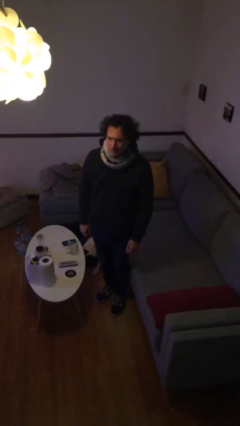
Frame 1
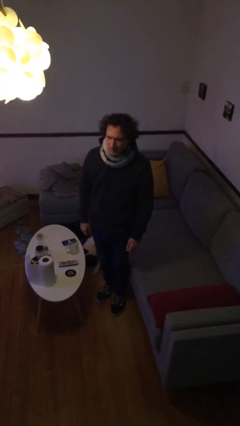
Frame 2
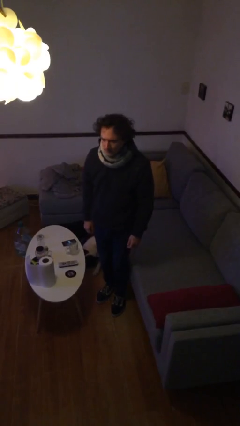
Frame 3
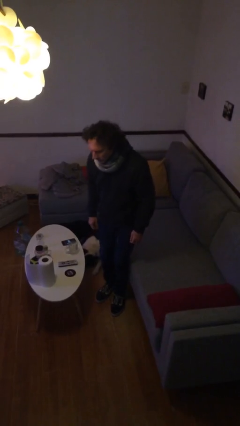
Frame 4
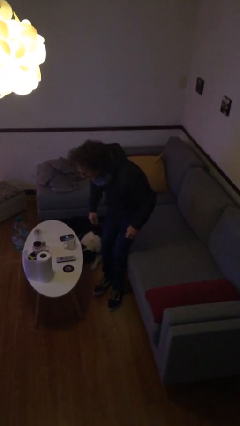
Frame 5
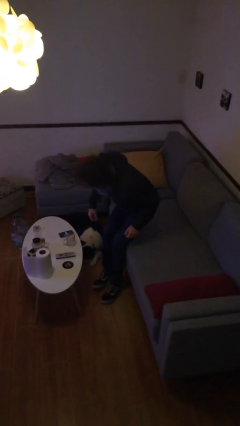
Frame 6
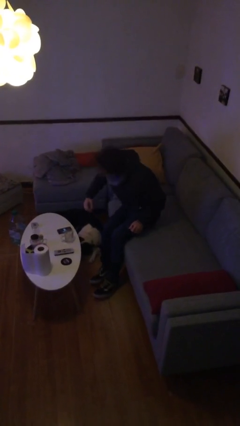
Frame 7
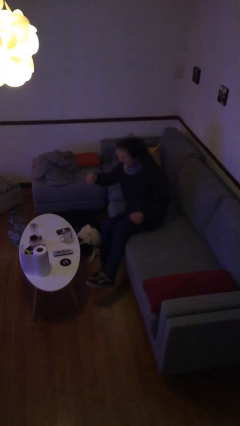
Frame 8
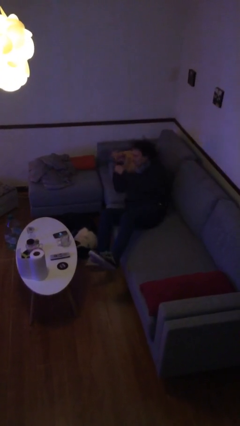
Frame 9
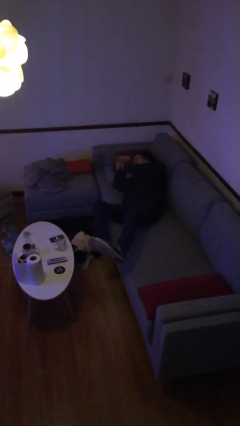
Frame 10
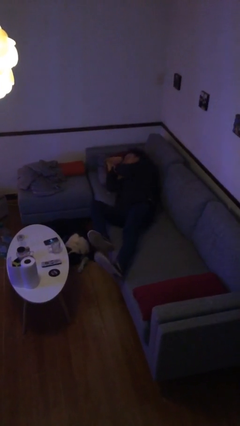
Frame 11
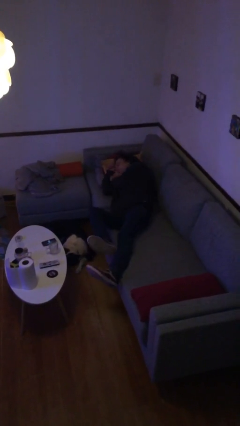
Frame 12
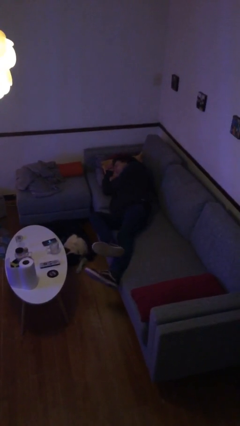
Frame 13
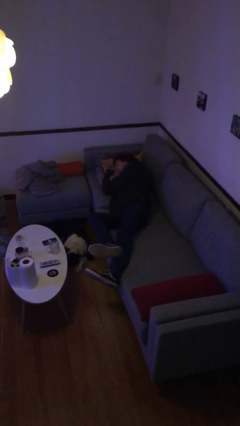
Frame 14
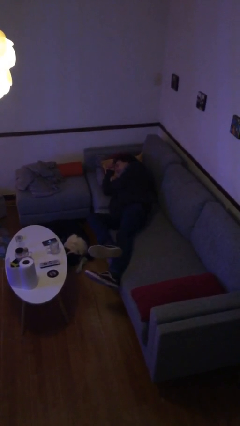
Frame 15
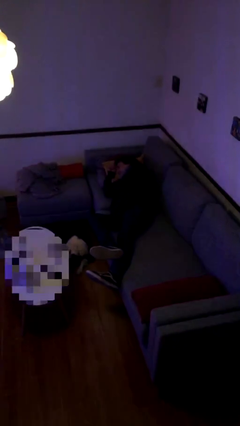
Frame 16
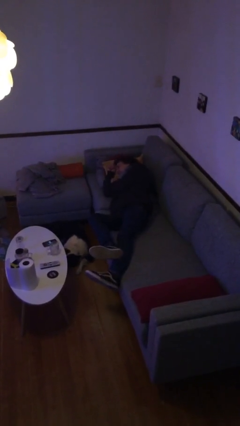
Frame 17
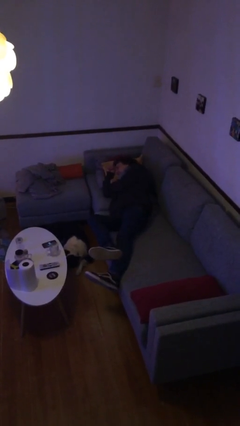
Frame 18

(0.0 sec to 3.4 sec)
person lies down on couch

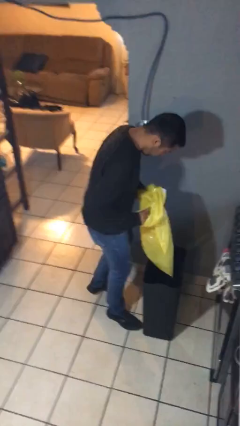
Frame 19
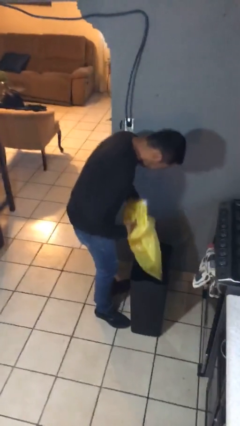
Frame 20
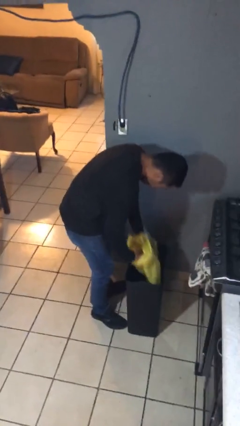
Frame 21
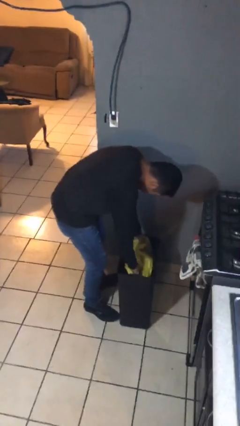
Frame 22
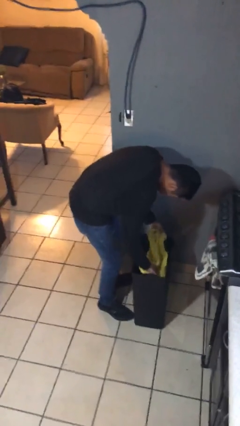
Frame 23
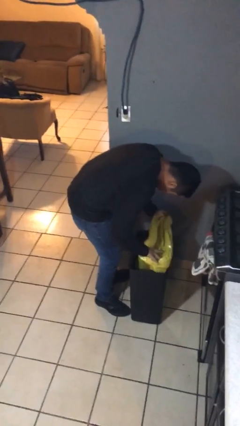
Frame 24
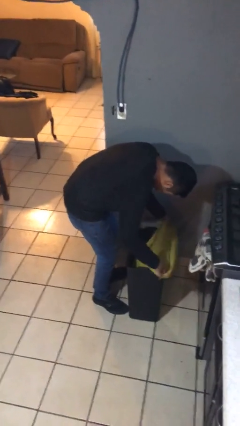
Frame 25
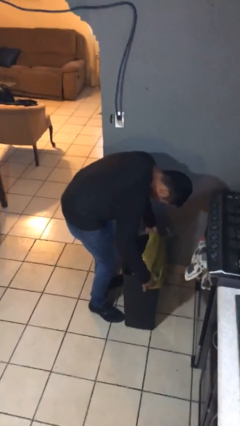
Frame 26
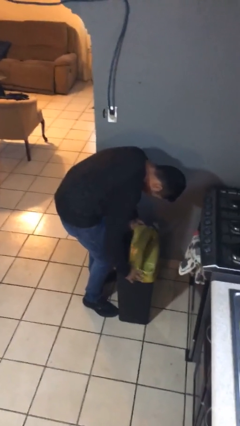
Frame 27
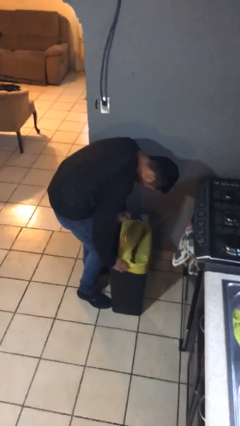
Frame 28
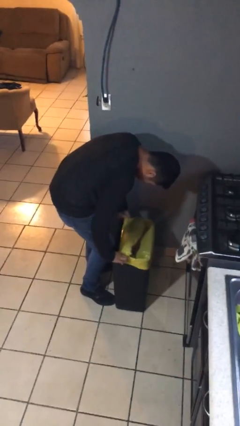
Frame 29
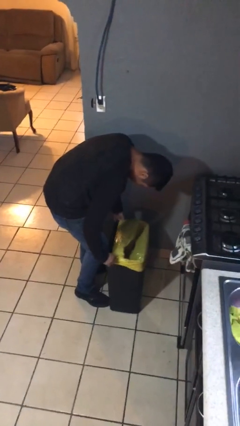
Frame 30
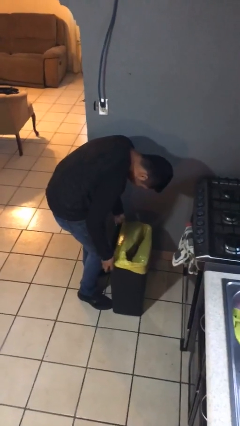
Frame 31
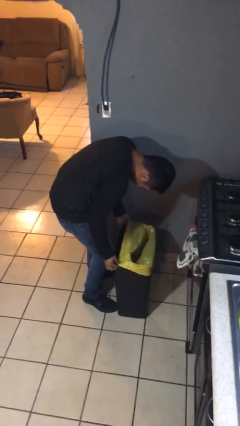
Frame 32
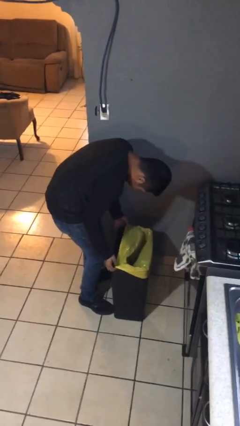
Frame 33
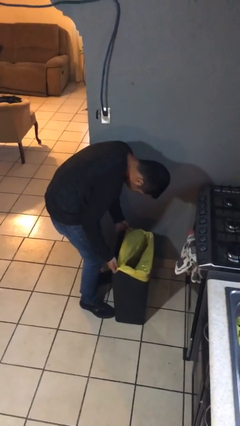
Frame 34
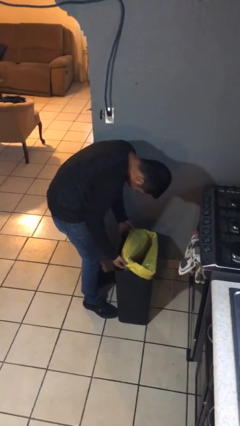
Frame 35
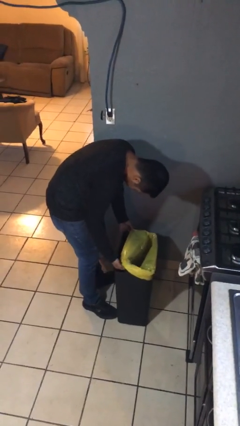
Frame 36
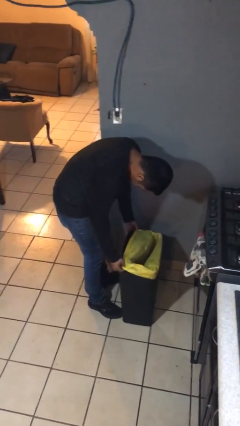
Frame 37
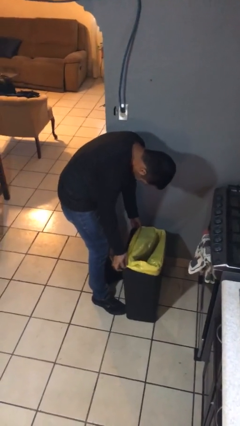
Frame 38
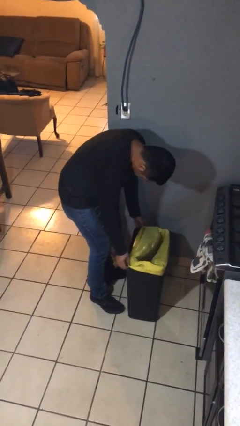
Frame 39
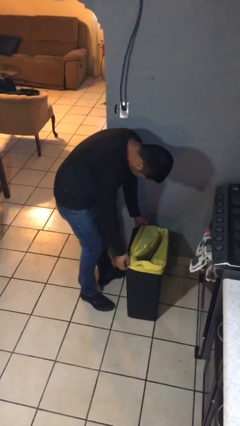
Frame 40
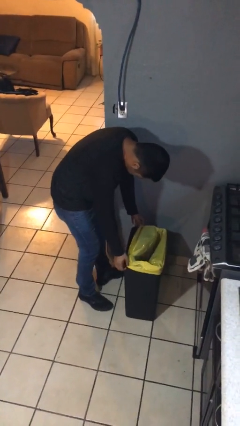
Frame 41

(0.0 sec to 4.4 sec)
person inserts trashbag into trashcan

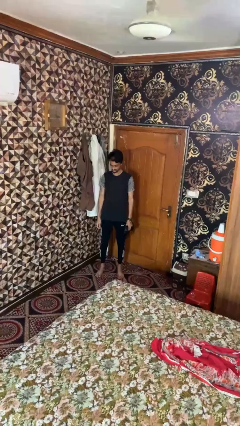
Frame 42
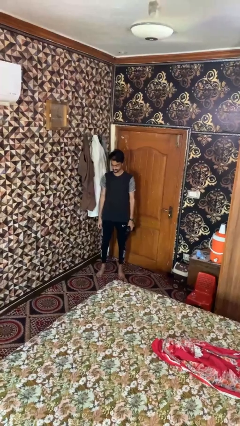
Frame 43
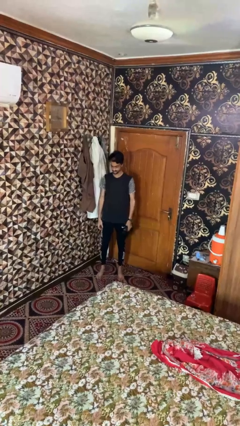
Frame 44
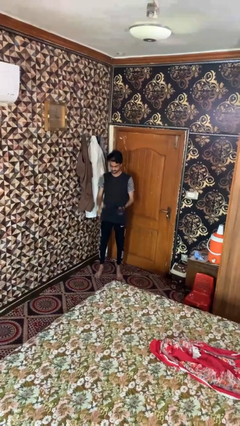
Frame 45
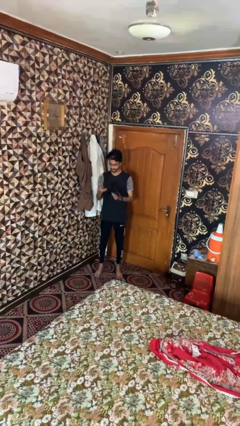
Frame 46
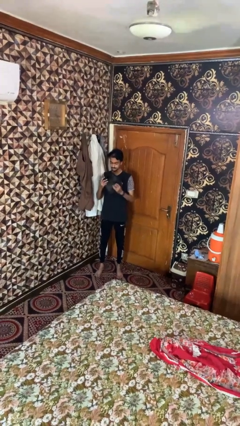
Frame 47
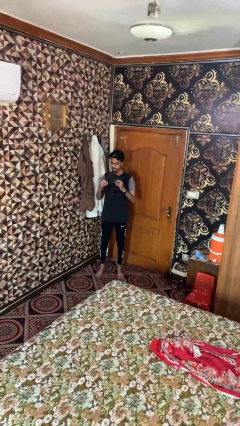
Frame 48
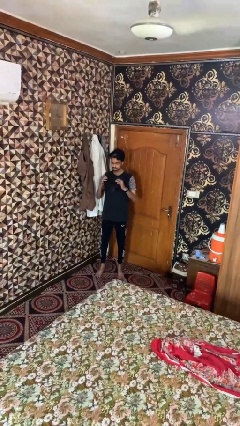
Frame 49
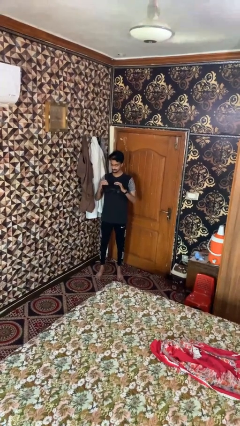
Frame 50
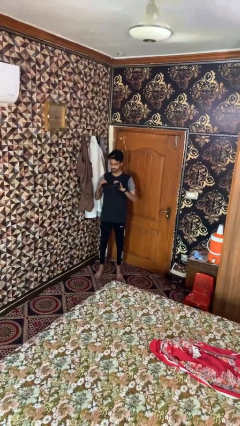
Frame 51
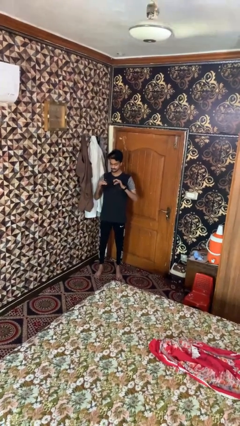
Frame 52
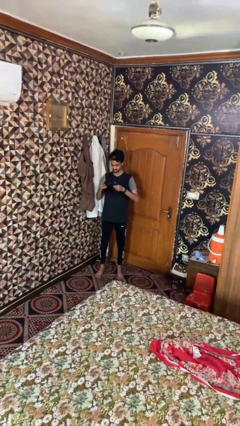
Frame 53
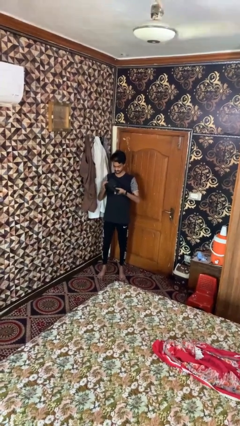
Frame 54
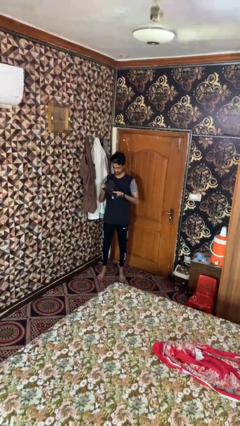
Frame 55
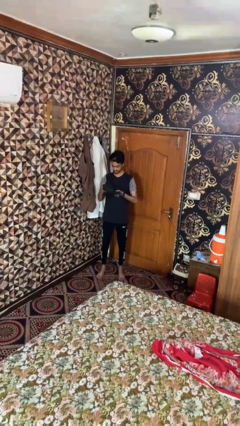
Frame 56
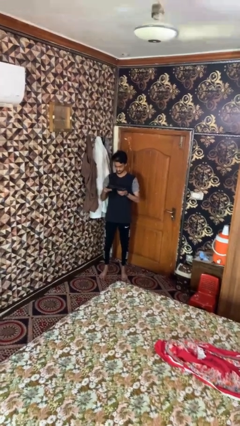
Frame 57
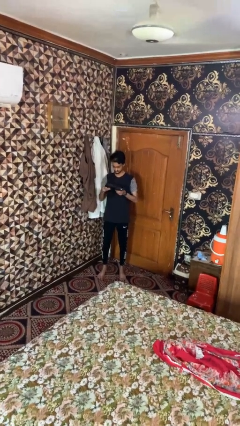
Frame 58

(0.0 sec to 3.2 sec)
person squeezes object

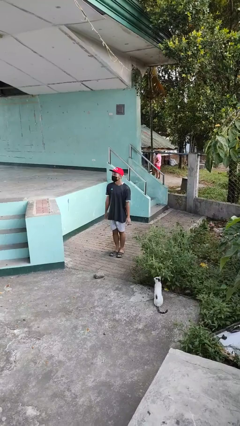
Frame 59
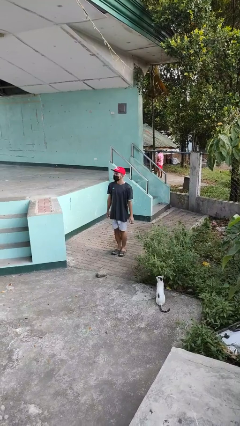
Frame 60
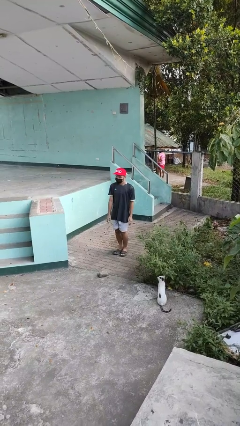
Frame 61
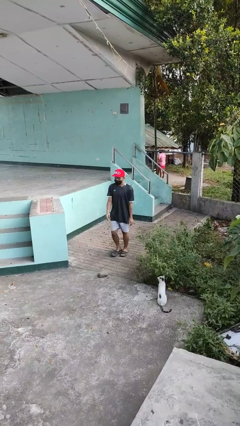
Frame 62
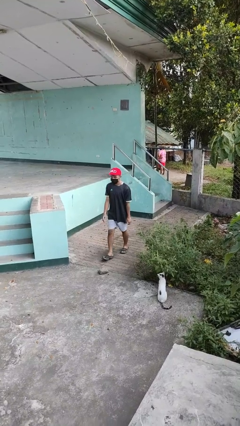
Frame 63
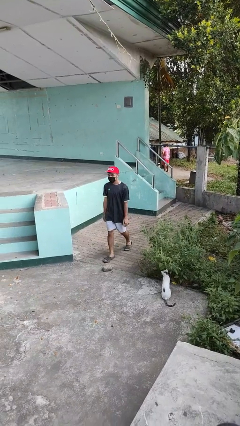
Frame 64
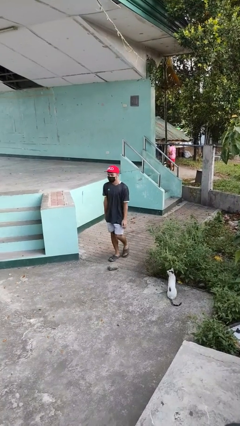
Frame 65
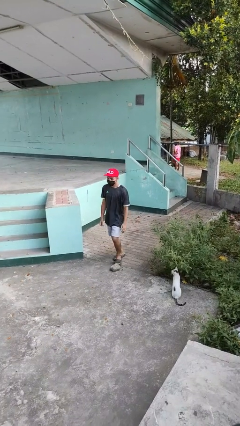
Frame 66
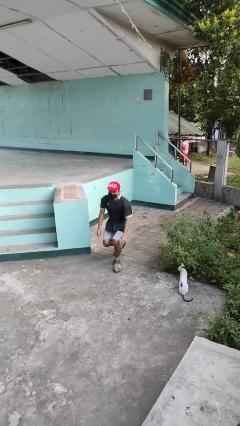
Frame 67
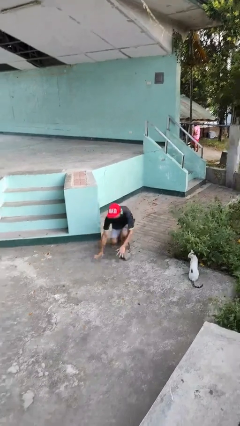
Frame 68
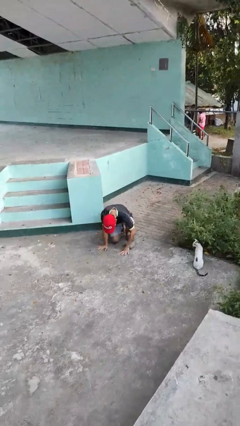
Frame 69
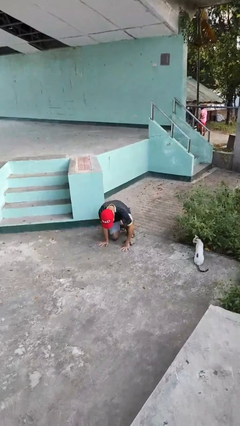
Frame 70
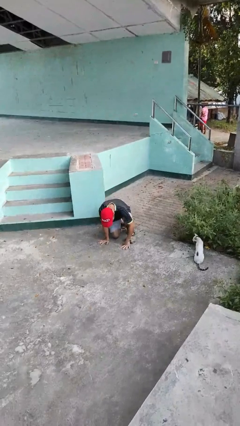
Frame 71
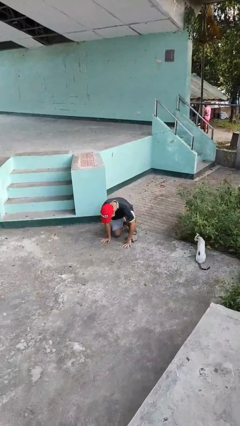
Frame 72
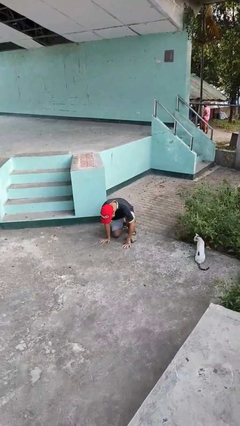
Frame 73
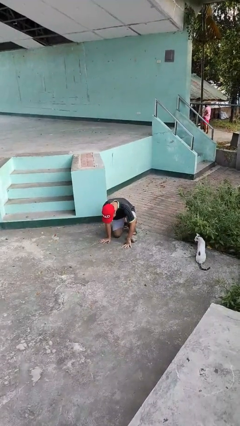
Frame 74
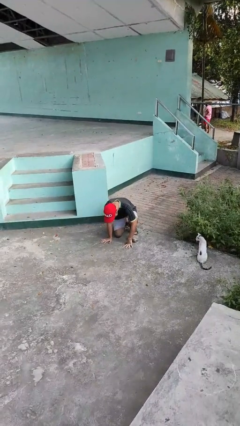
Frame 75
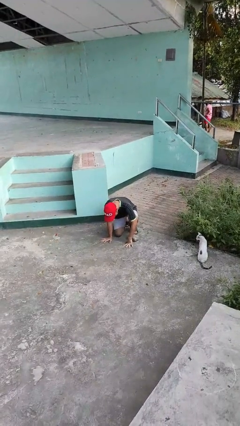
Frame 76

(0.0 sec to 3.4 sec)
person trips on object on floor

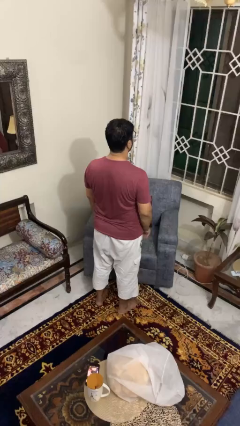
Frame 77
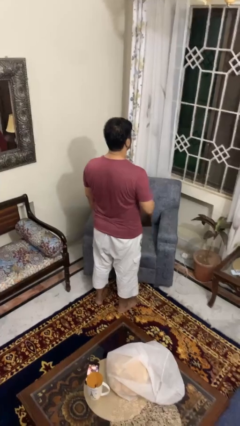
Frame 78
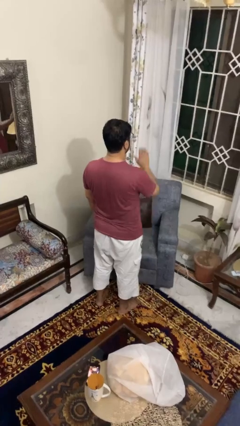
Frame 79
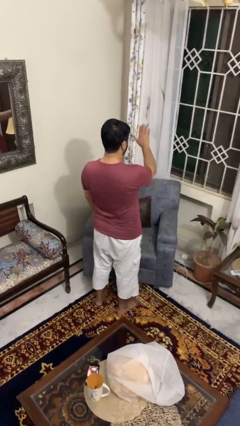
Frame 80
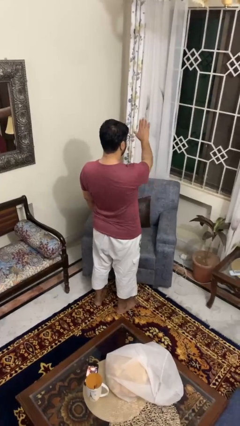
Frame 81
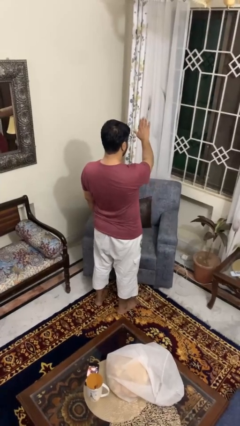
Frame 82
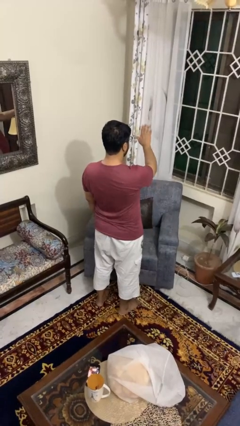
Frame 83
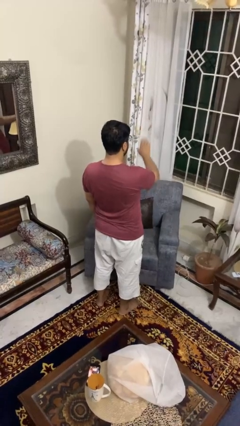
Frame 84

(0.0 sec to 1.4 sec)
person gestures stop

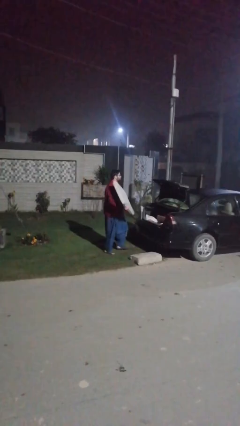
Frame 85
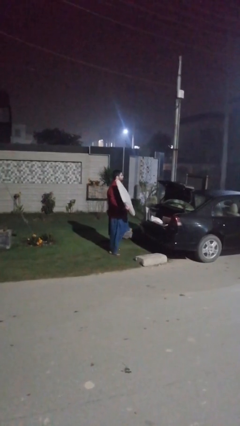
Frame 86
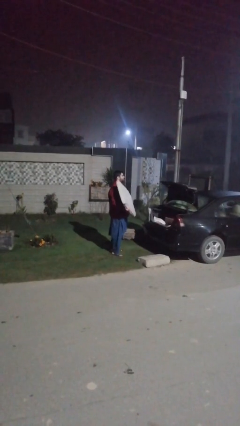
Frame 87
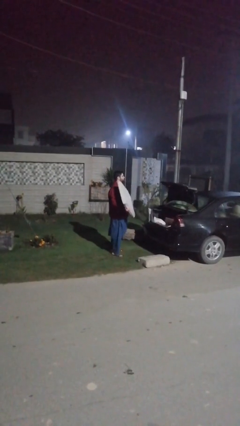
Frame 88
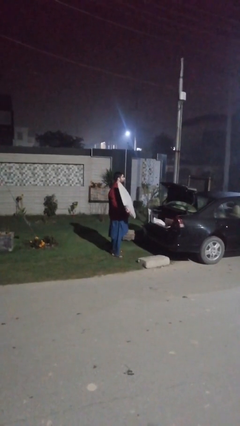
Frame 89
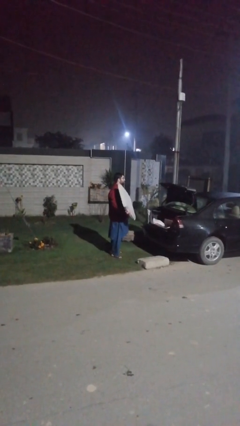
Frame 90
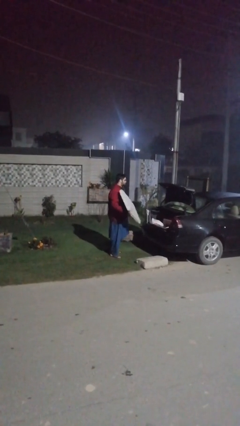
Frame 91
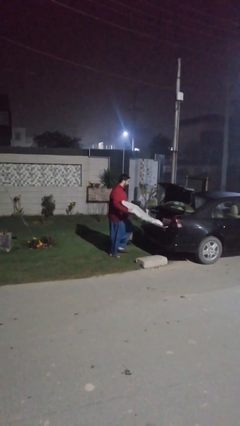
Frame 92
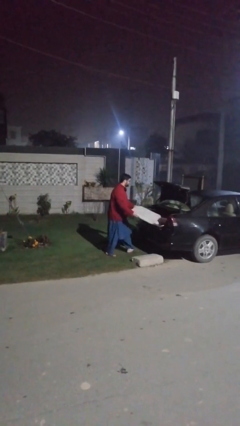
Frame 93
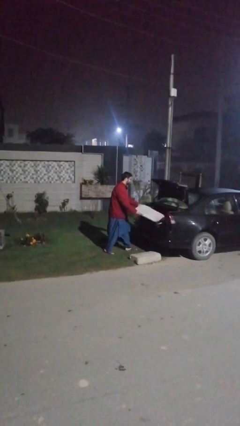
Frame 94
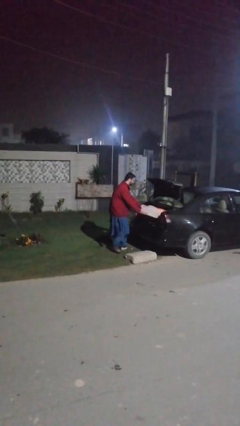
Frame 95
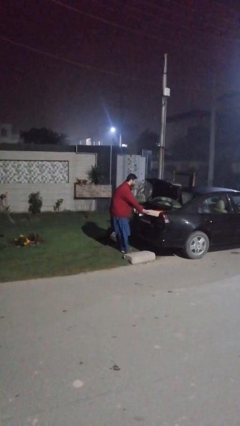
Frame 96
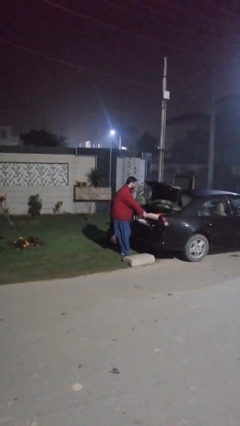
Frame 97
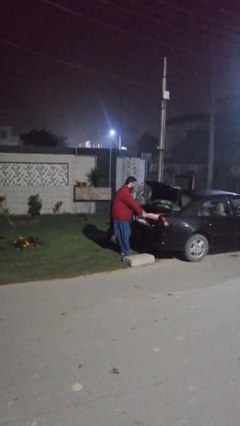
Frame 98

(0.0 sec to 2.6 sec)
person unloads car
